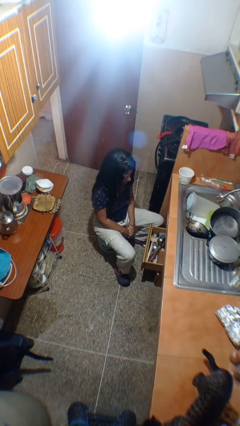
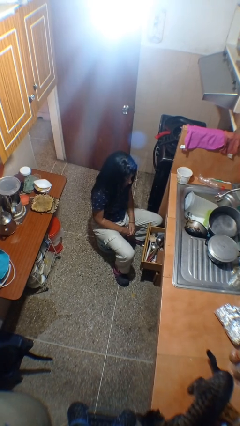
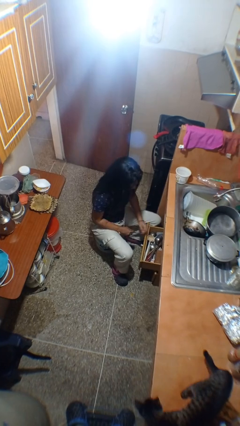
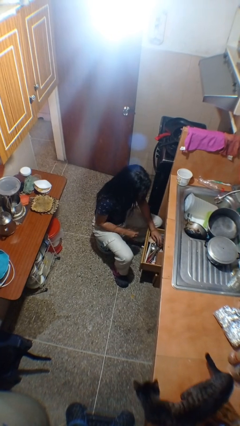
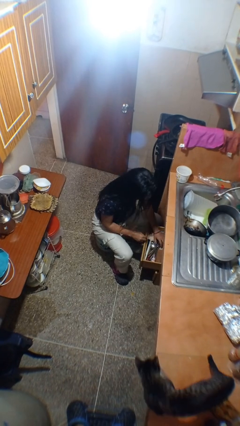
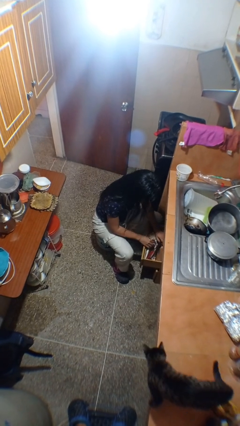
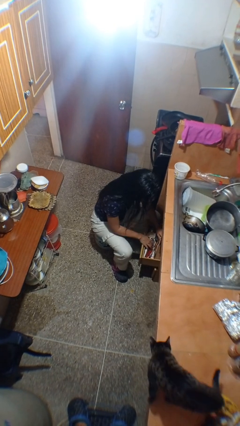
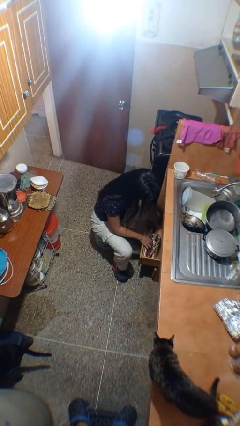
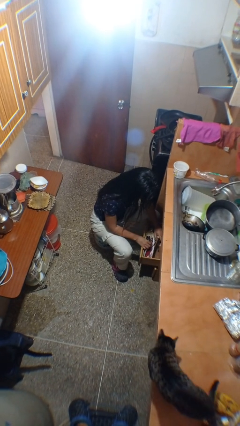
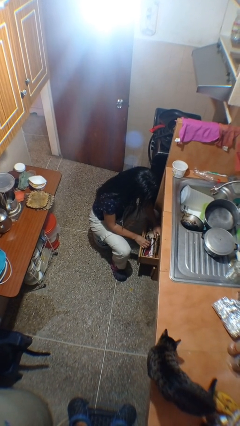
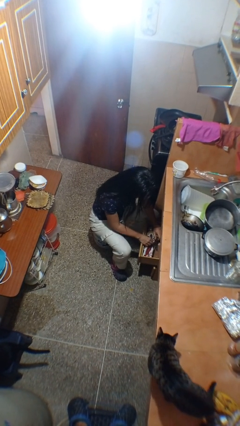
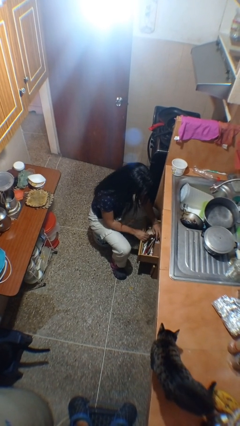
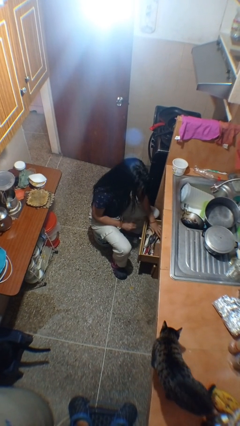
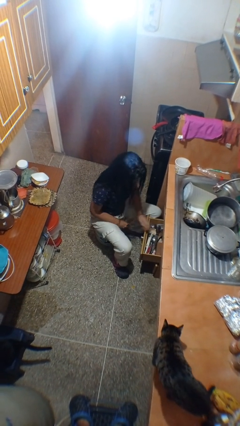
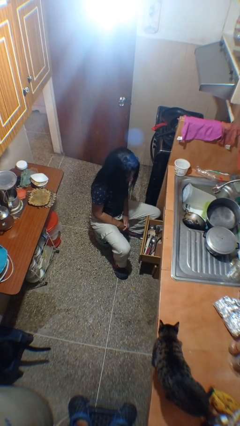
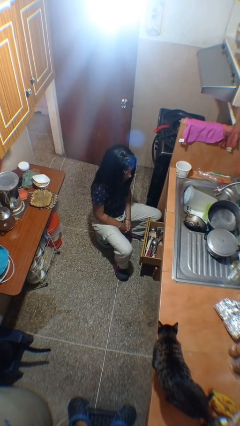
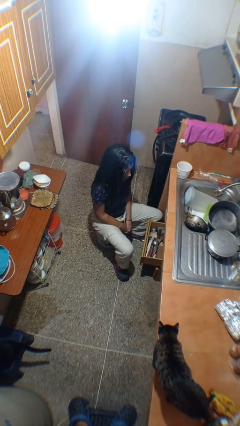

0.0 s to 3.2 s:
person searches in kitchen drawer

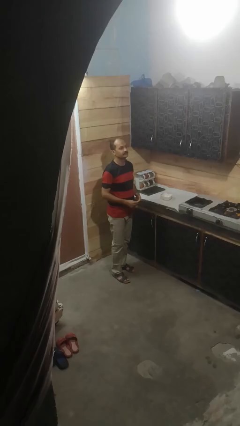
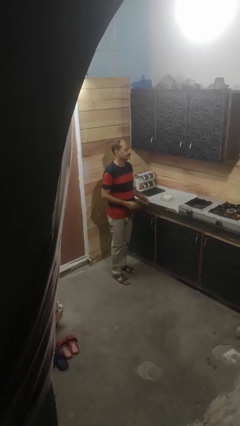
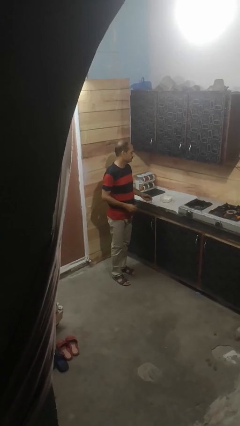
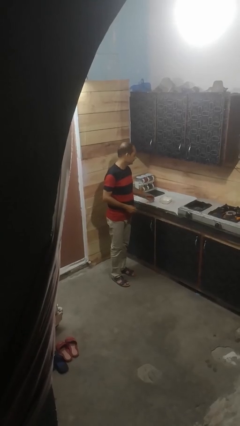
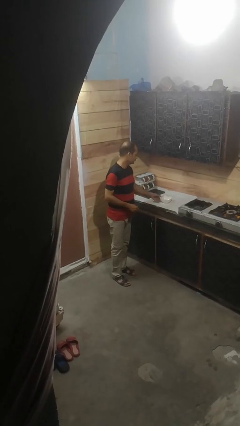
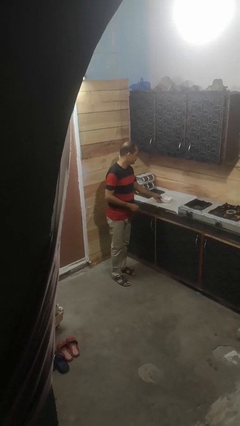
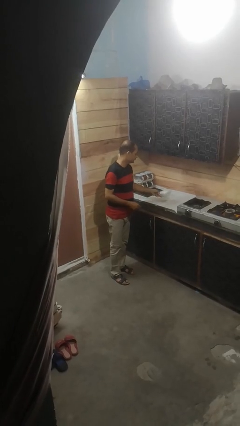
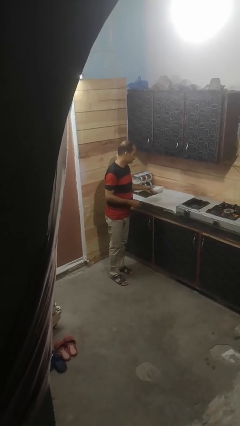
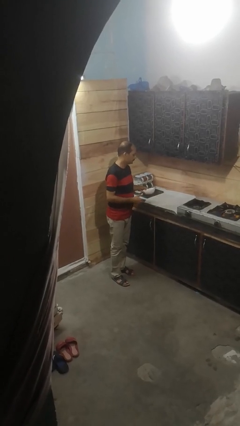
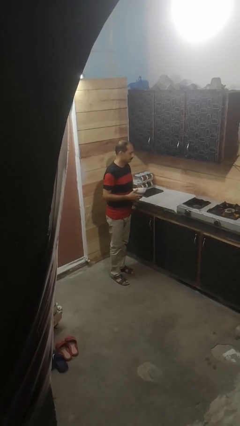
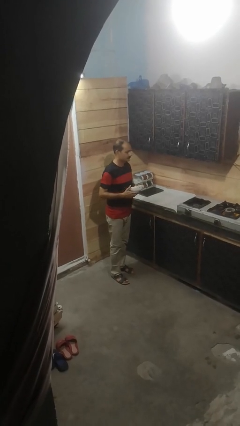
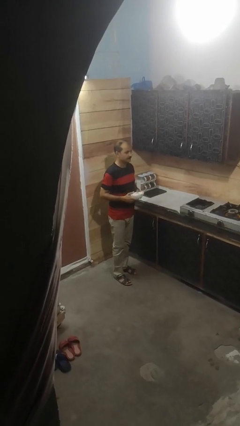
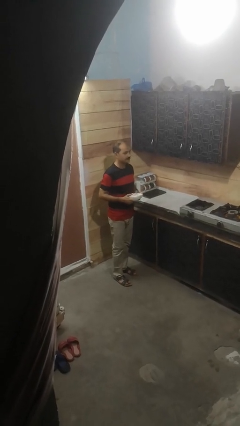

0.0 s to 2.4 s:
person picks up object from countertop

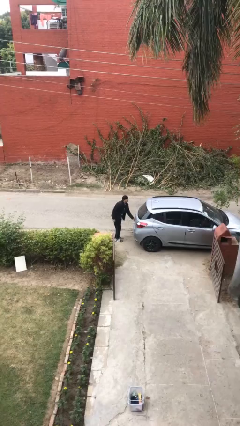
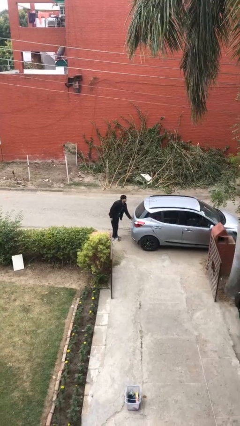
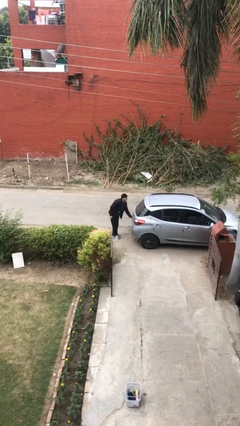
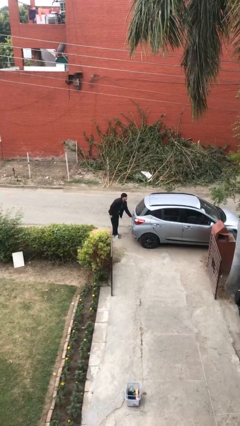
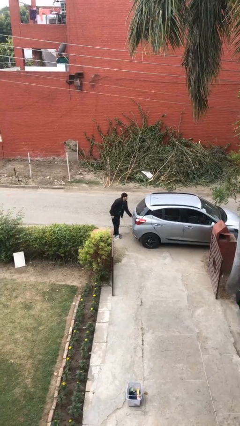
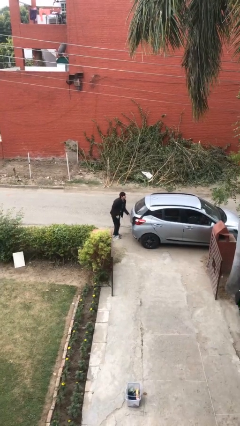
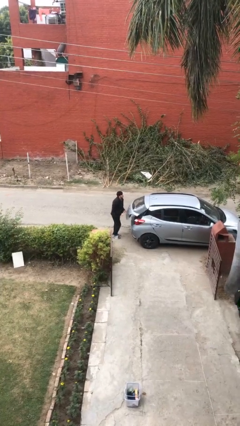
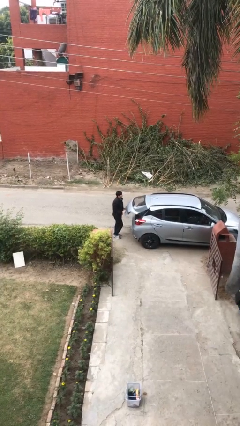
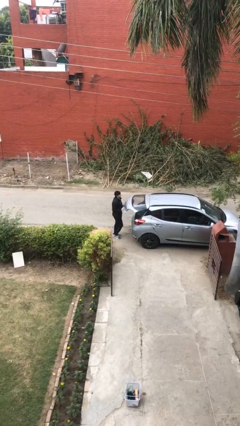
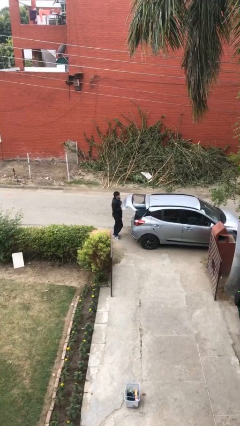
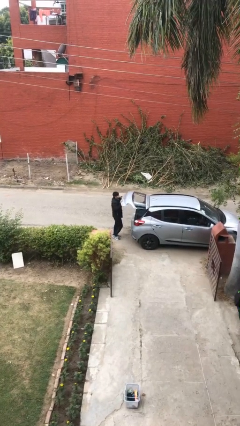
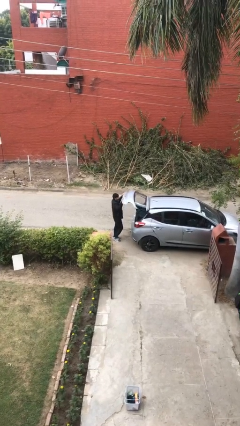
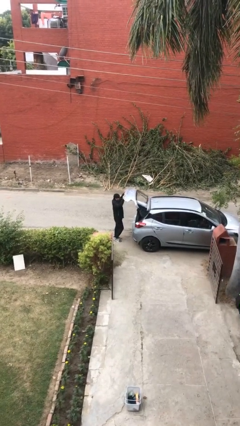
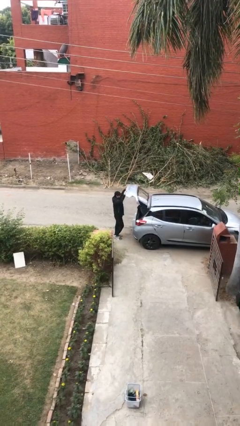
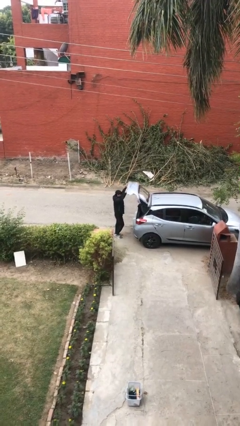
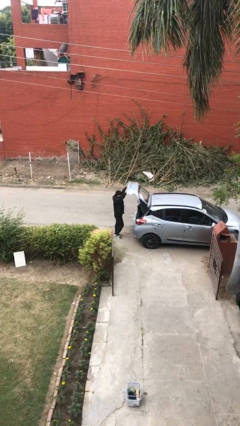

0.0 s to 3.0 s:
person opens car trunk

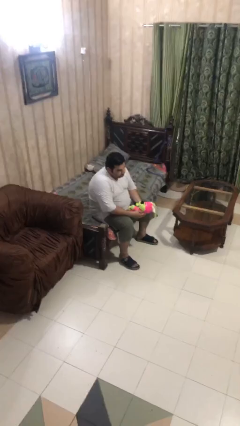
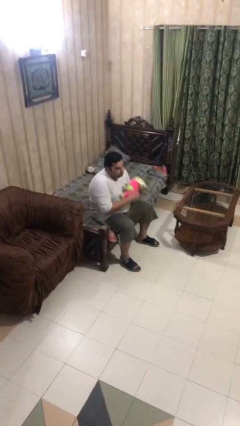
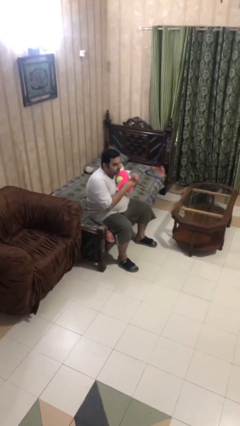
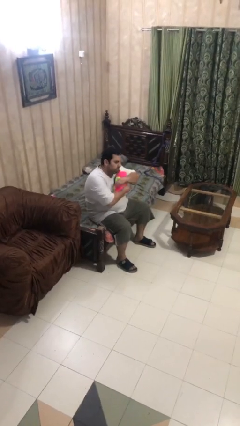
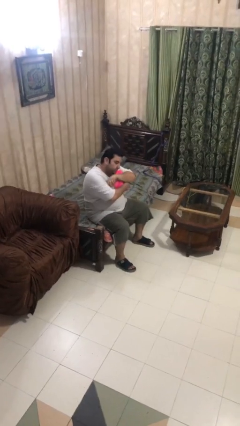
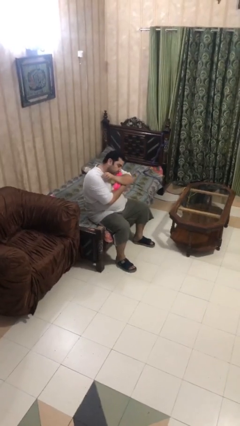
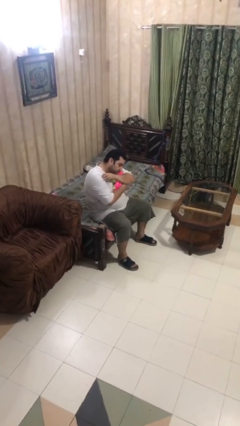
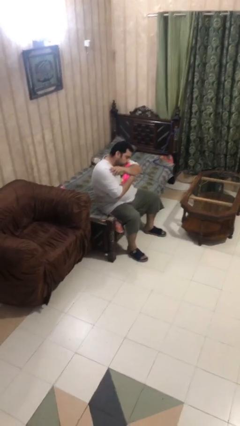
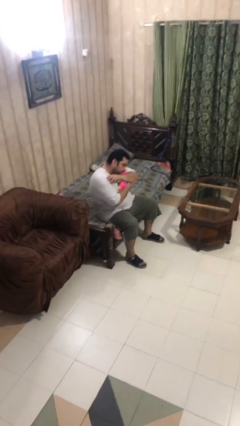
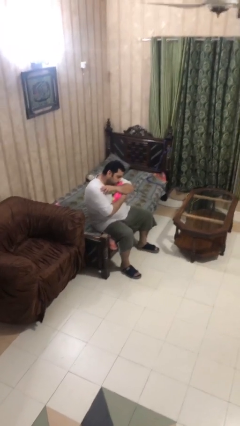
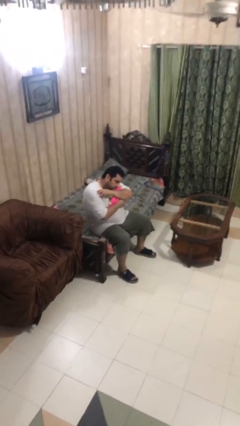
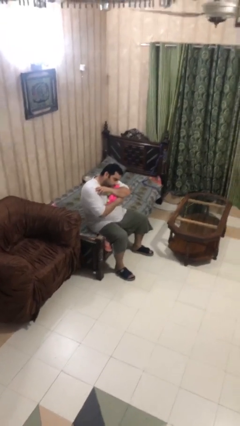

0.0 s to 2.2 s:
person hugs stuffed animal

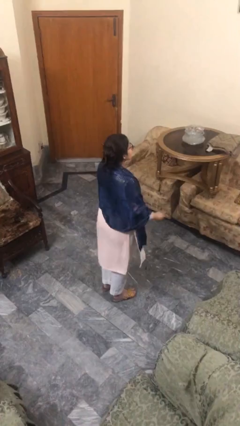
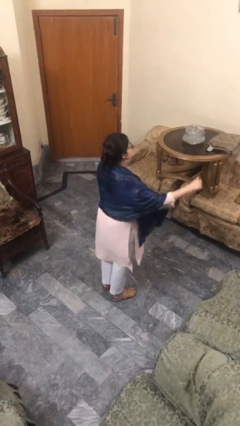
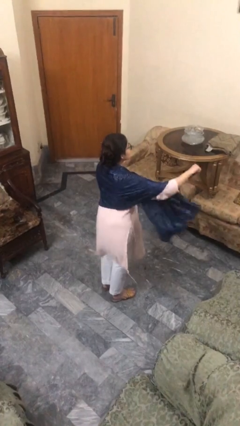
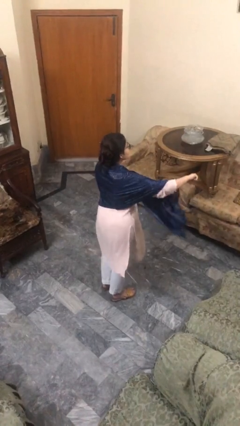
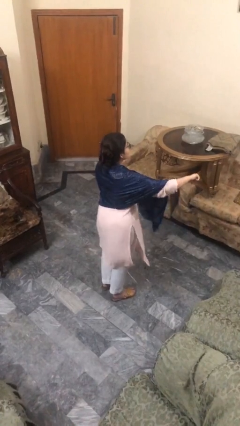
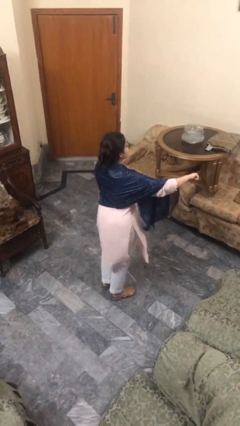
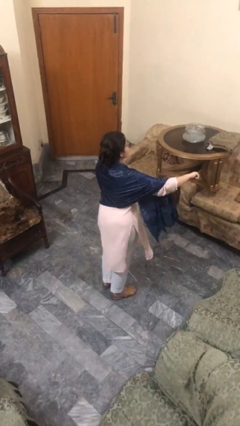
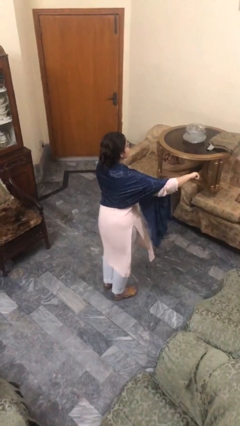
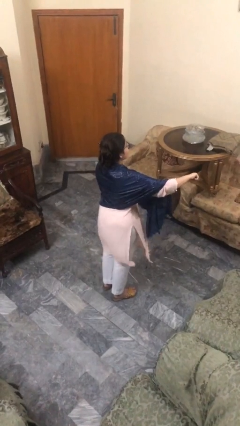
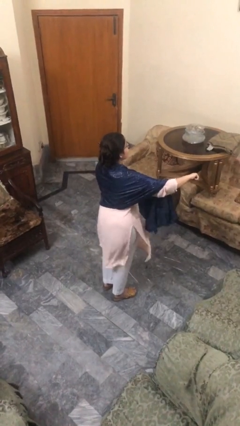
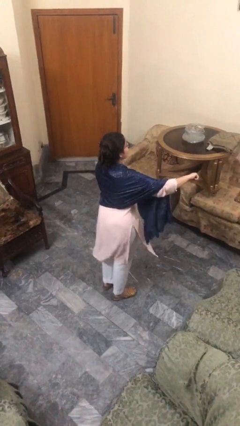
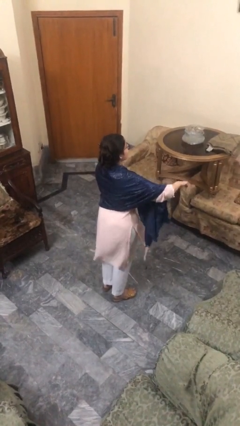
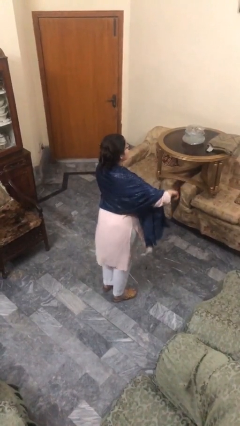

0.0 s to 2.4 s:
person gestures thumbs down

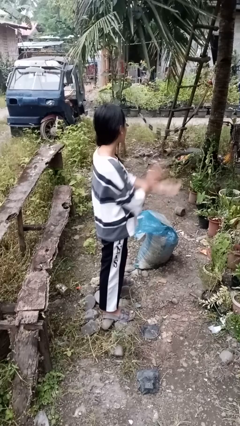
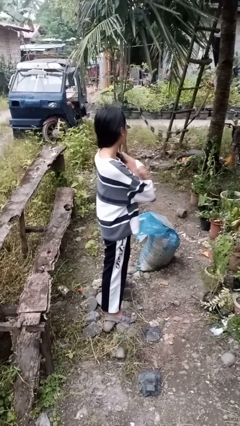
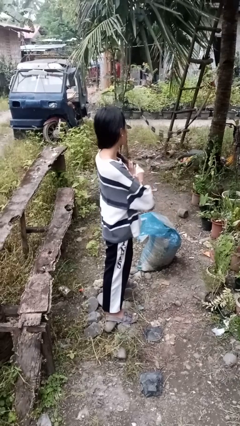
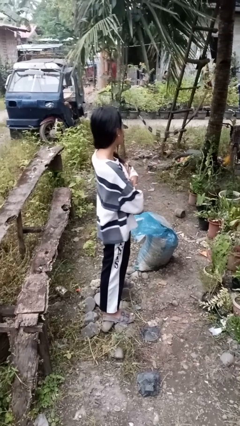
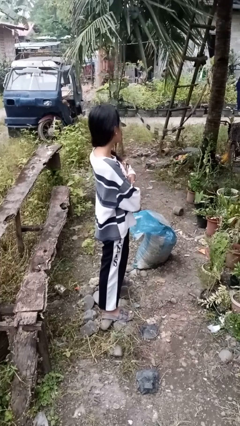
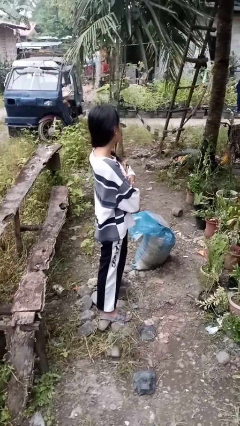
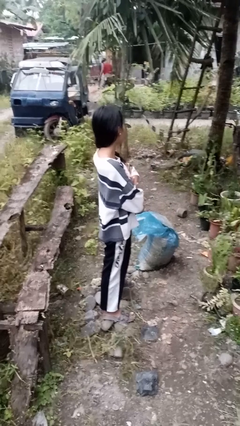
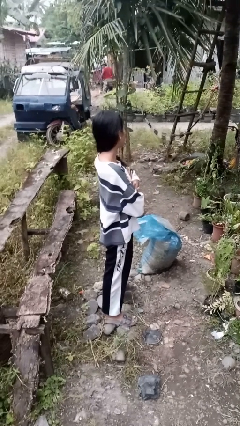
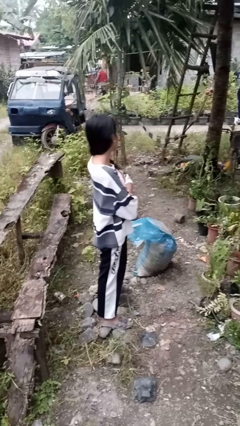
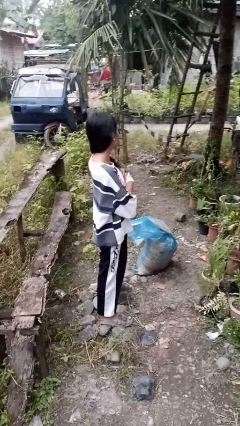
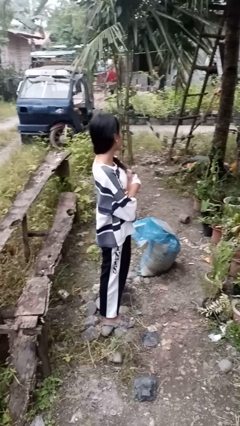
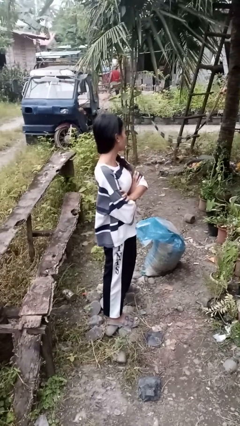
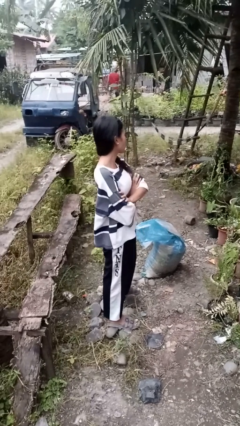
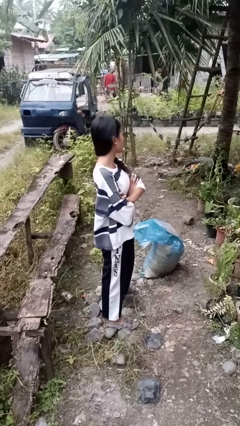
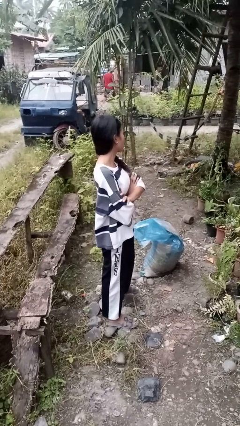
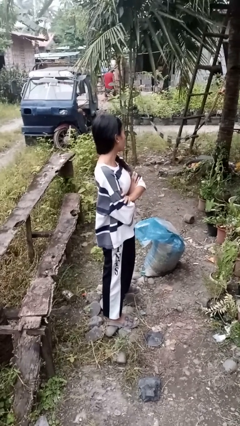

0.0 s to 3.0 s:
person crosses arms

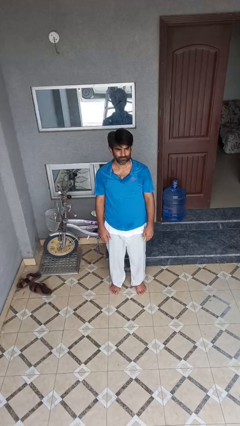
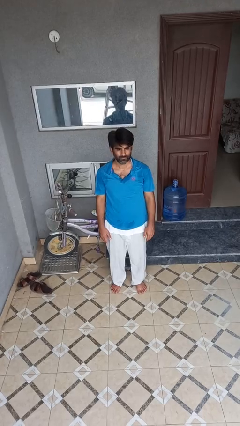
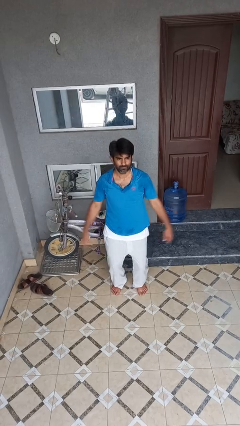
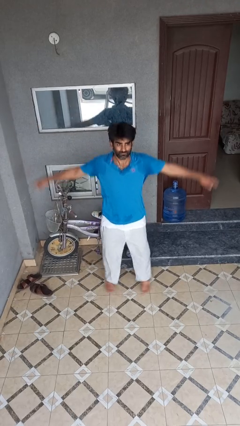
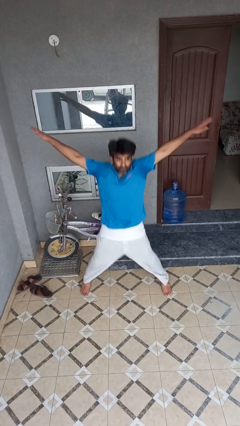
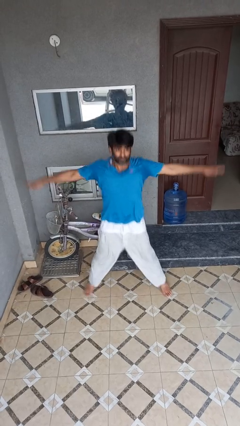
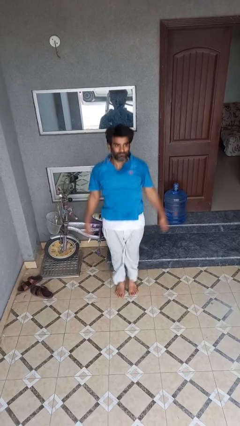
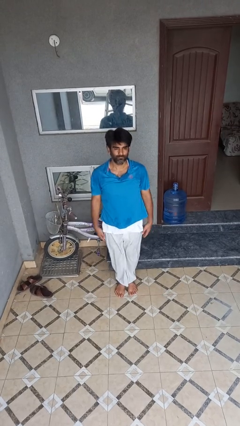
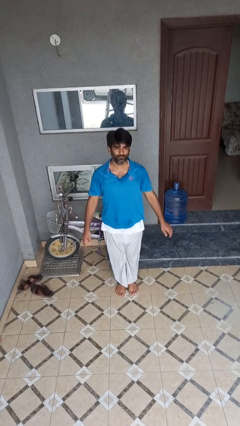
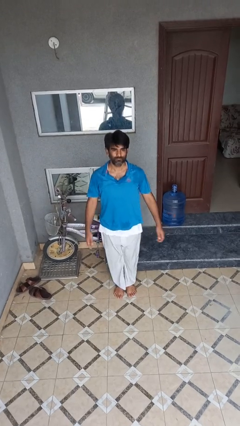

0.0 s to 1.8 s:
person exercises with jumping jacks
